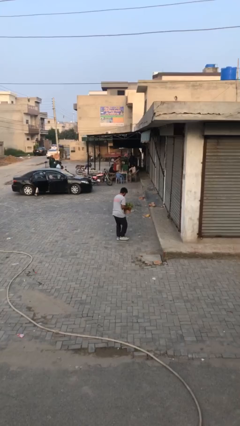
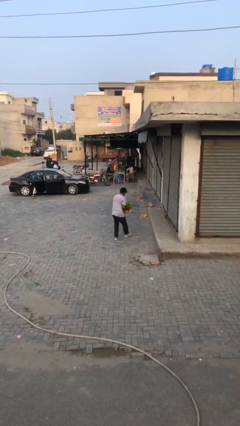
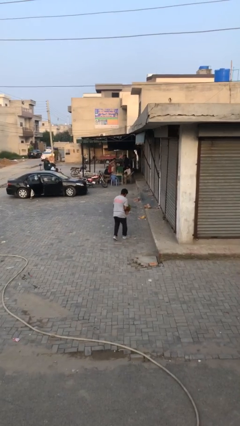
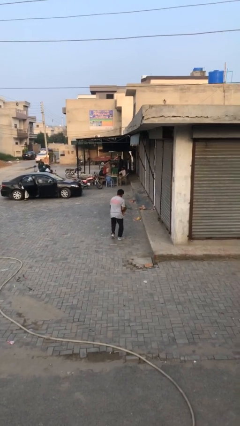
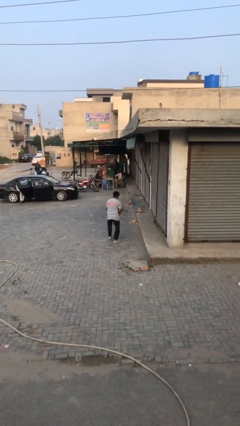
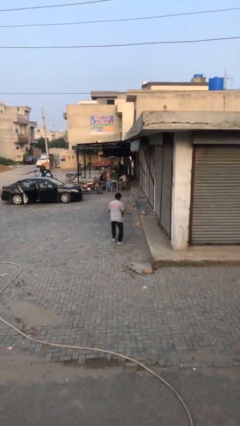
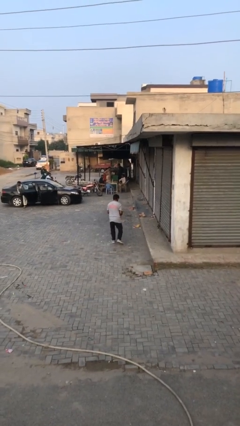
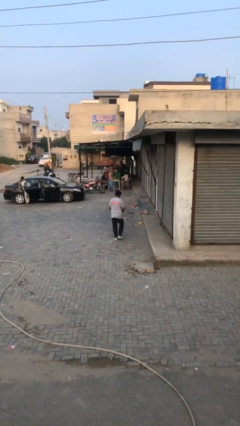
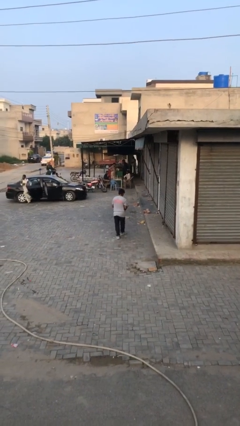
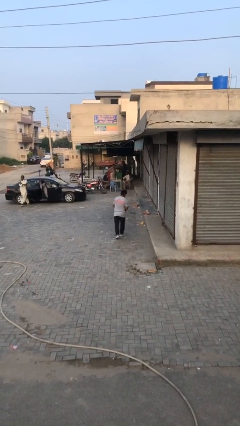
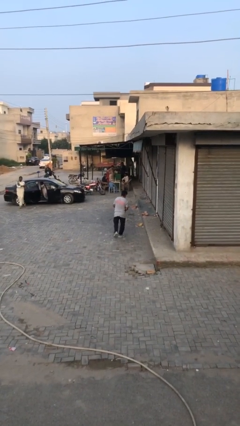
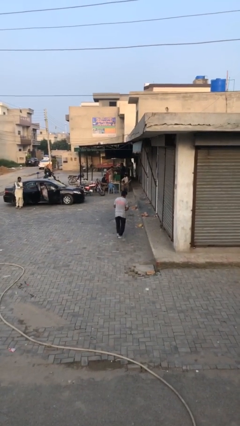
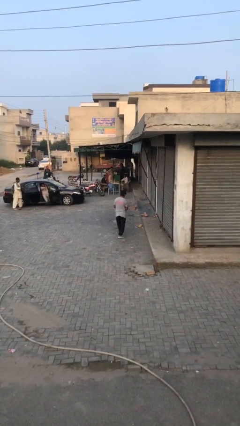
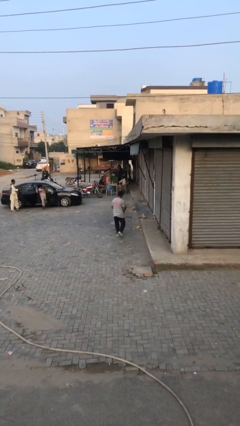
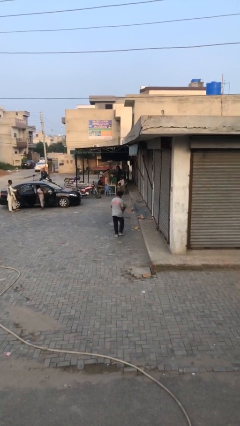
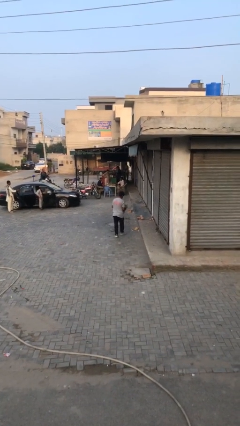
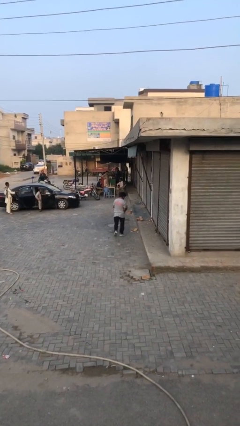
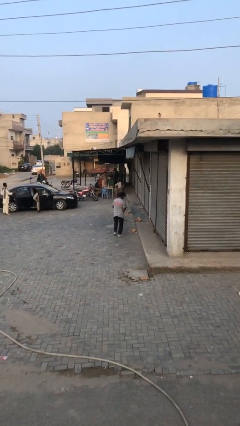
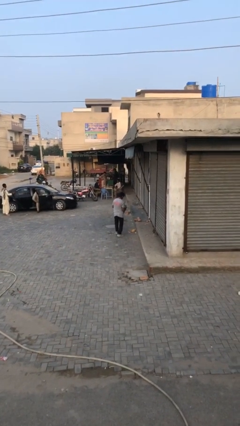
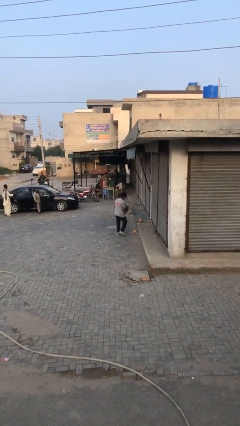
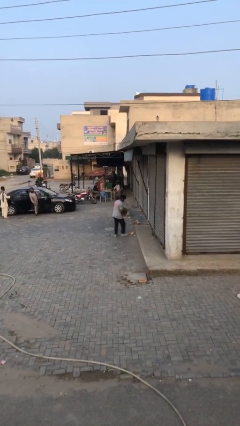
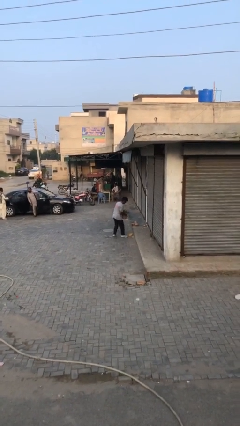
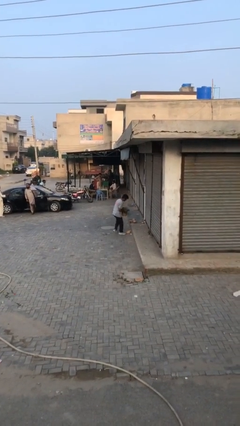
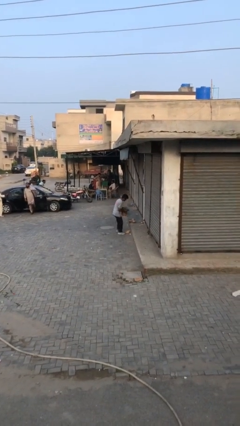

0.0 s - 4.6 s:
person carries heavy object

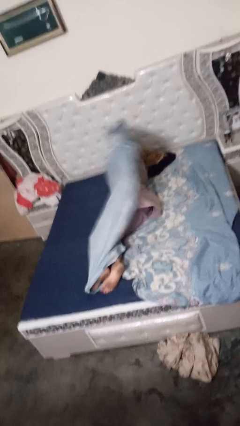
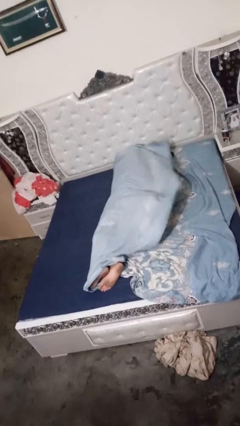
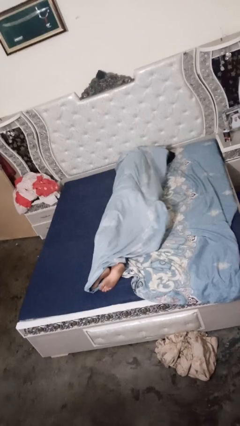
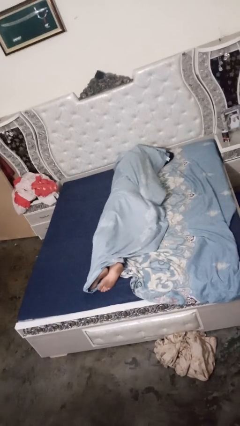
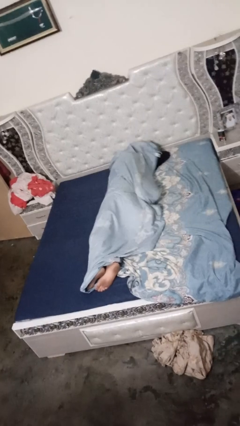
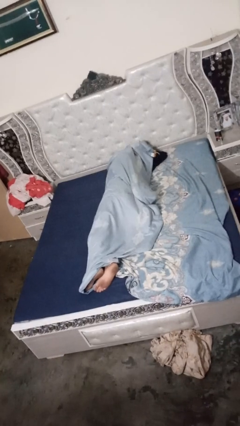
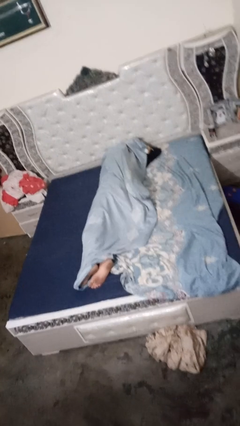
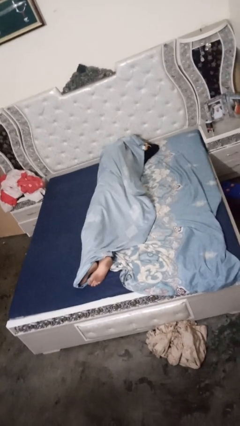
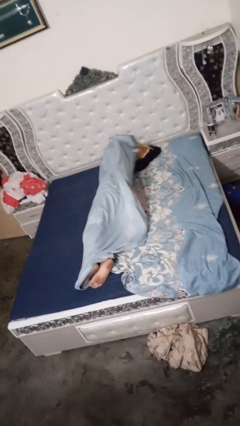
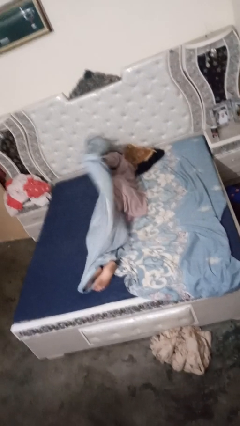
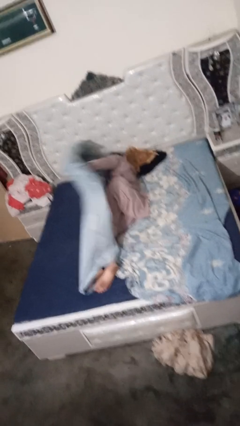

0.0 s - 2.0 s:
person covers with bedsheets

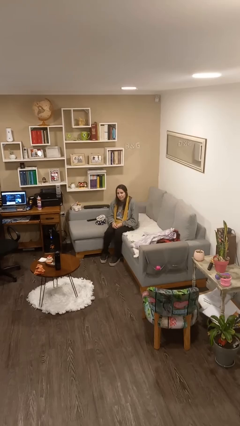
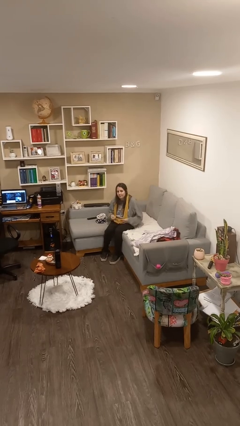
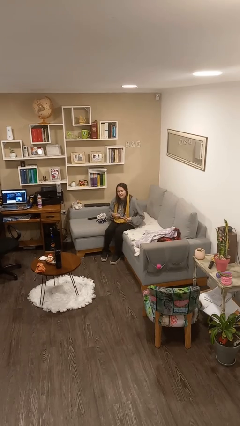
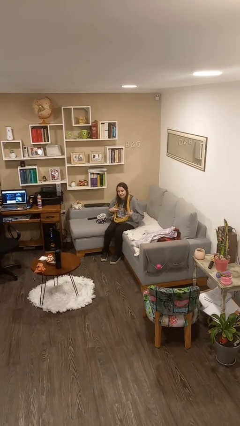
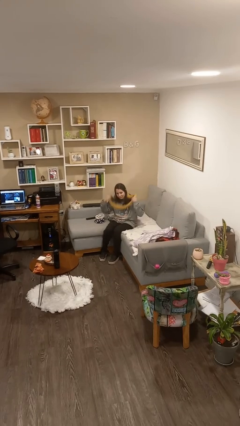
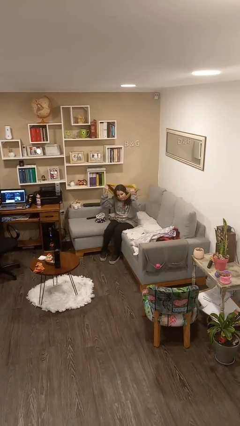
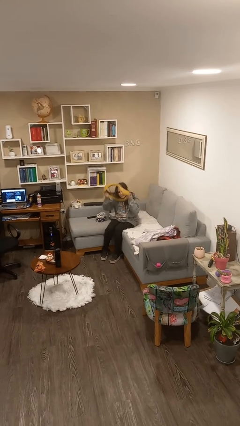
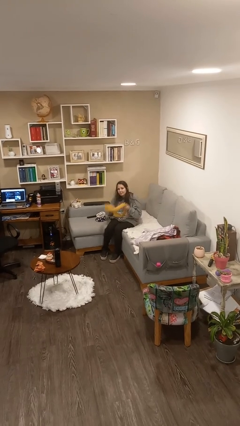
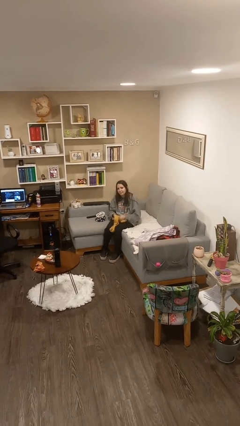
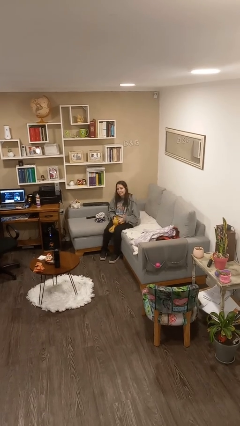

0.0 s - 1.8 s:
person takes off scarf

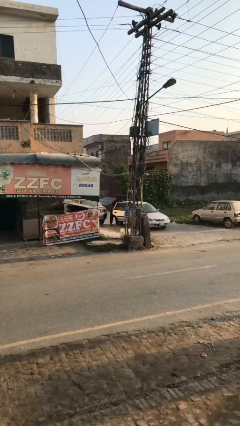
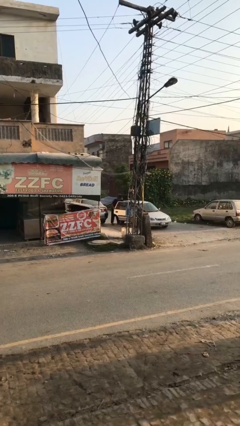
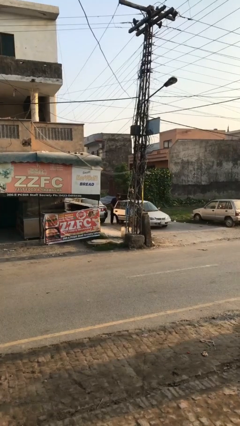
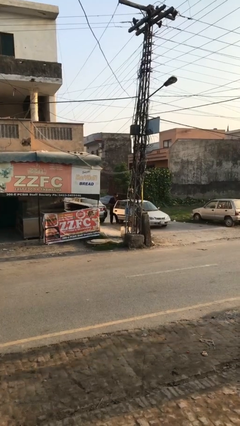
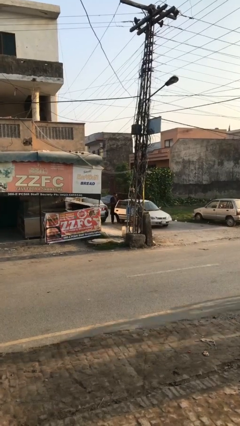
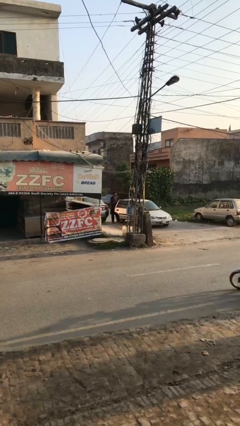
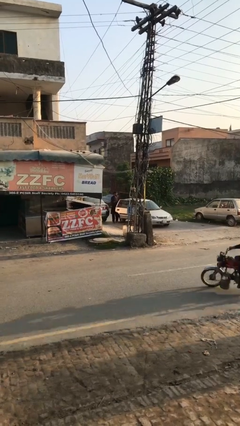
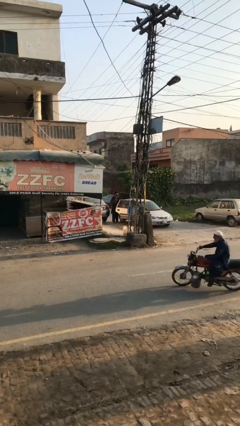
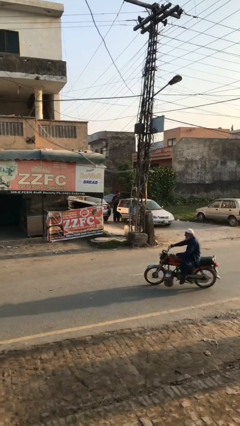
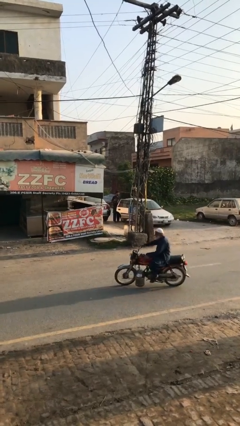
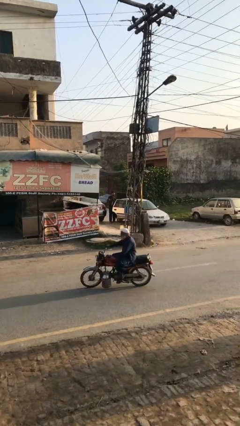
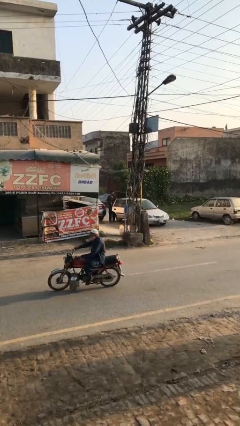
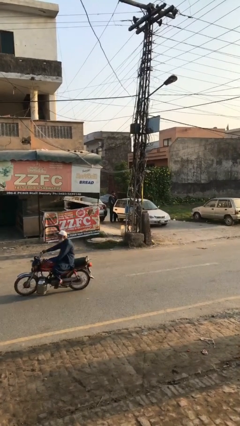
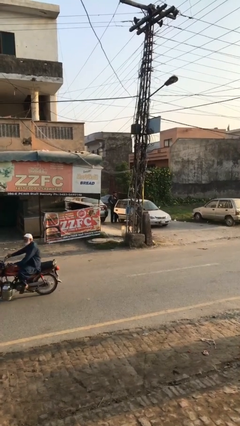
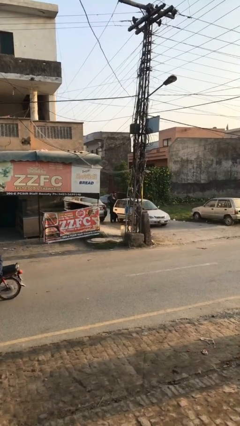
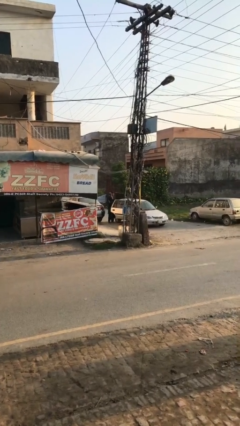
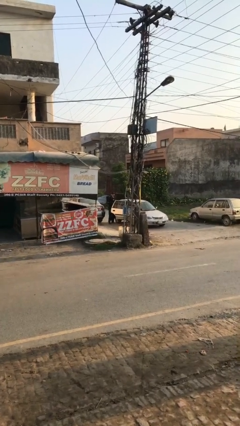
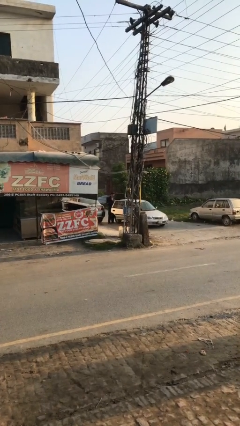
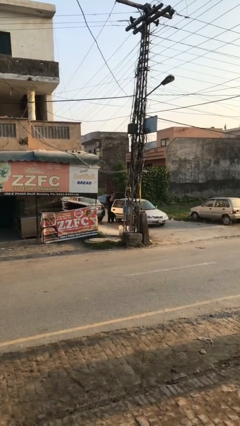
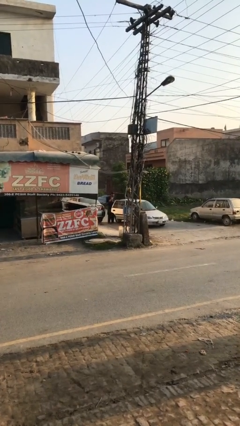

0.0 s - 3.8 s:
person unloads car

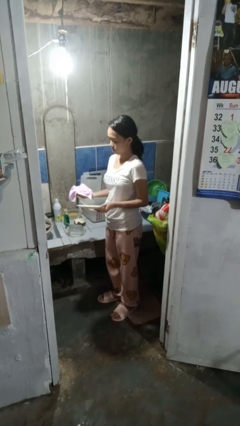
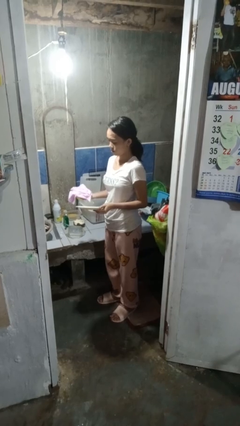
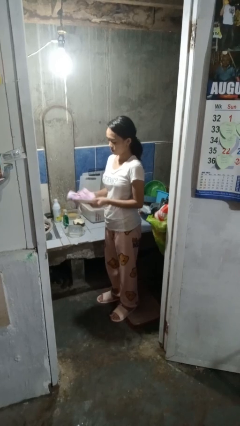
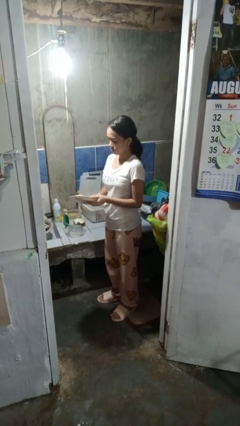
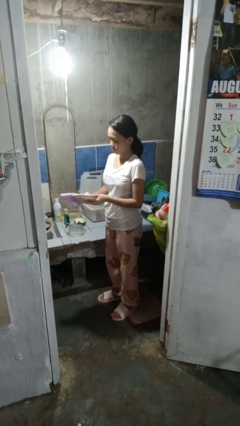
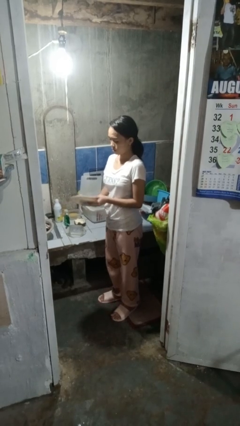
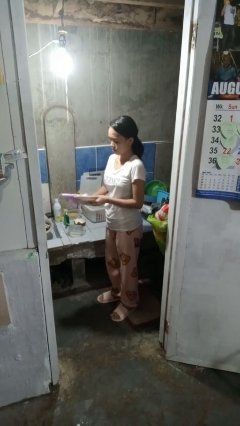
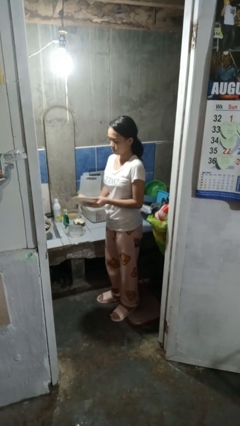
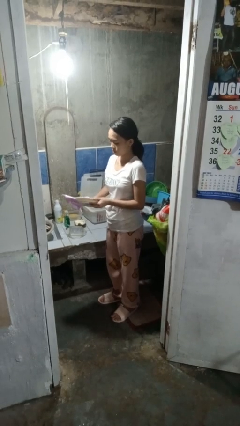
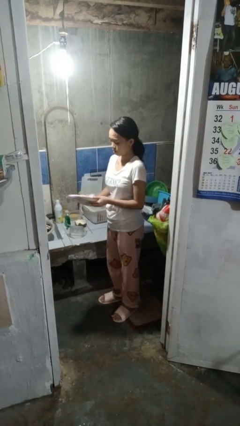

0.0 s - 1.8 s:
person dries dish

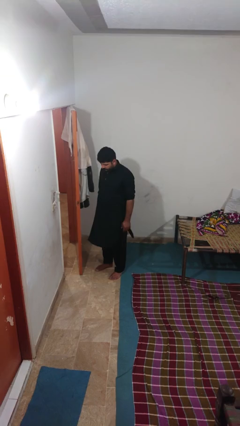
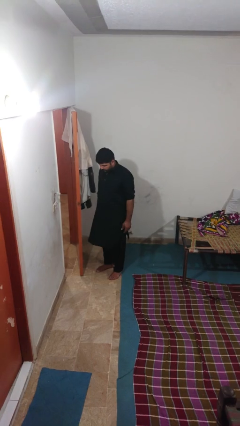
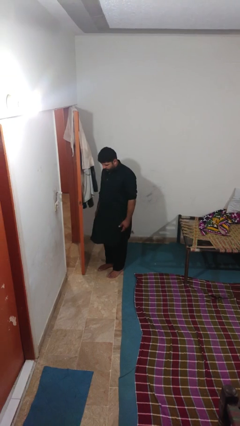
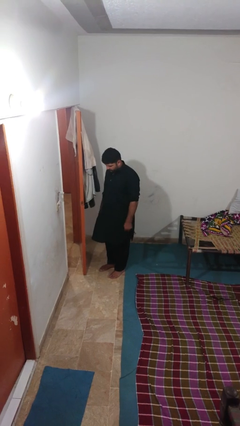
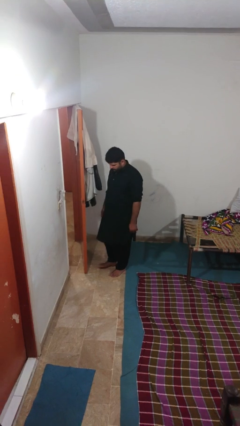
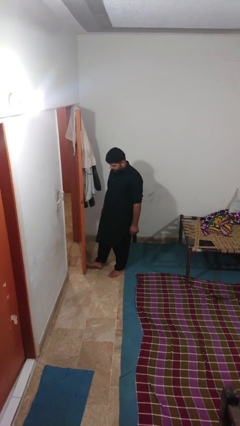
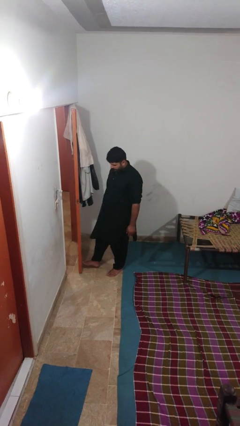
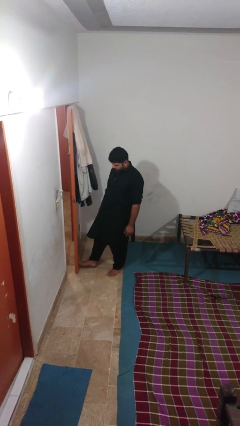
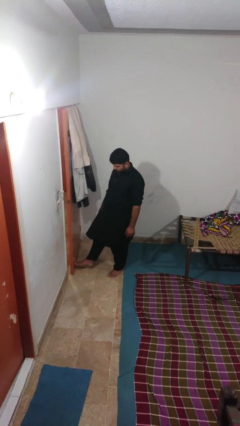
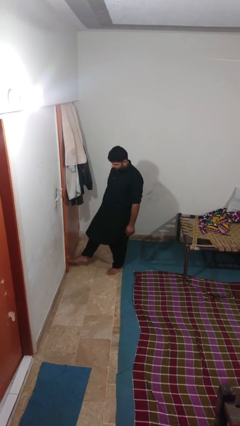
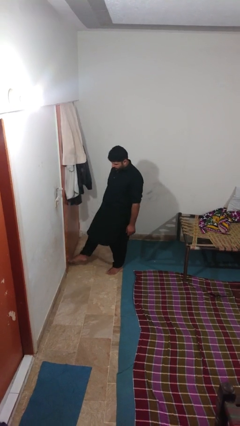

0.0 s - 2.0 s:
person closes door with foot

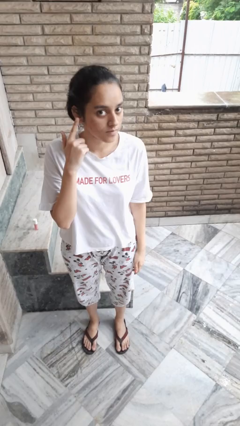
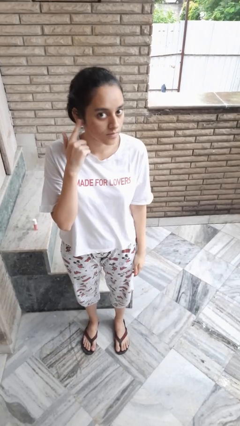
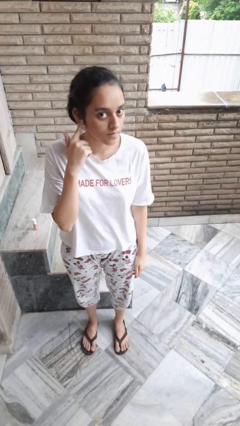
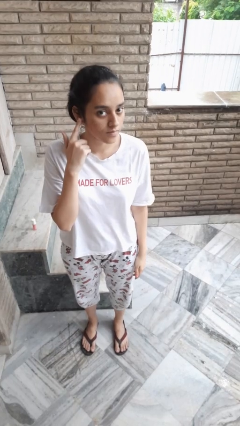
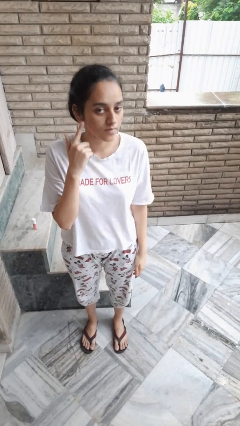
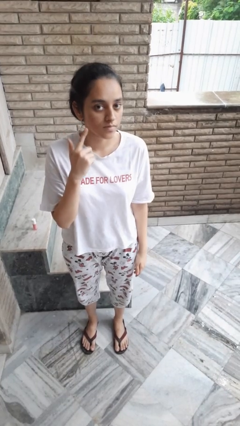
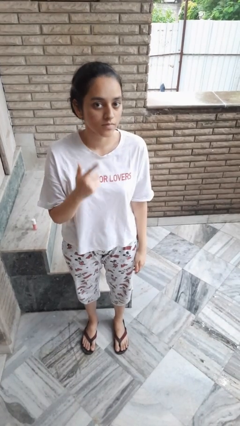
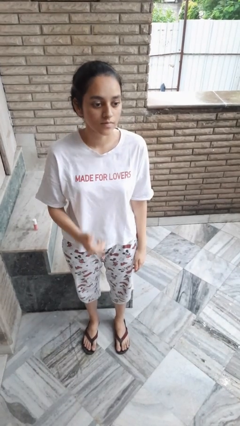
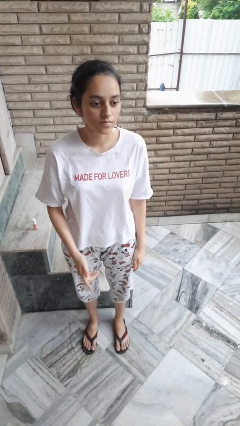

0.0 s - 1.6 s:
person gestures listen closely
